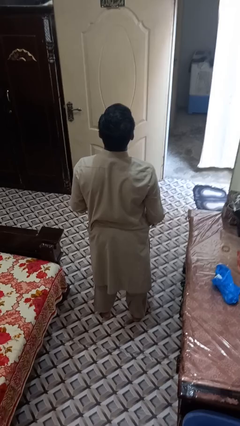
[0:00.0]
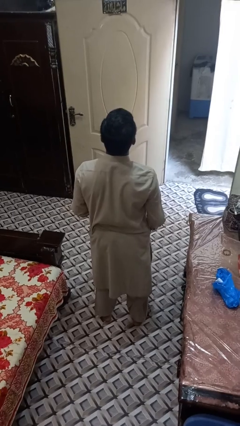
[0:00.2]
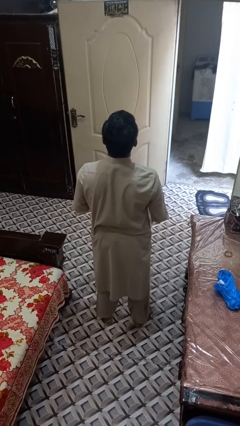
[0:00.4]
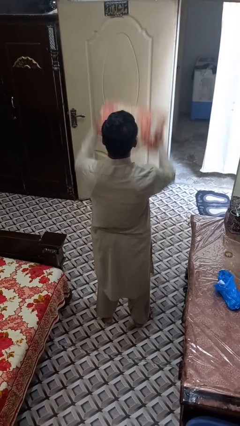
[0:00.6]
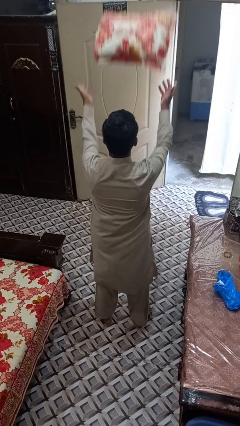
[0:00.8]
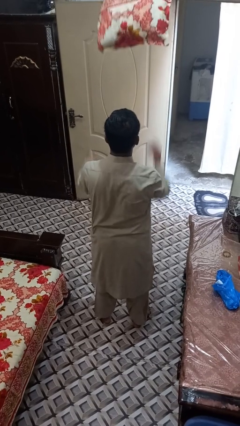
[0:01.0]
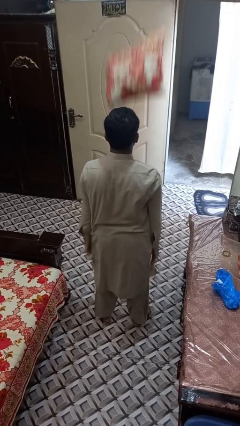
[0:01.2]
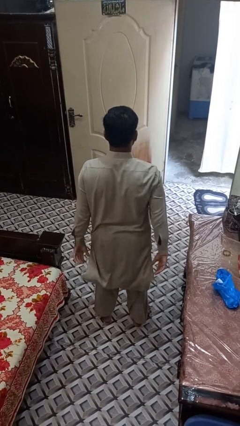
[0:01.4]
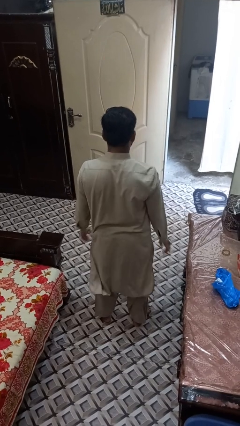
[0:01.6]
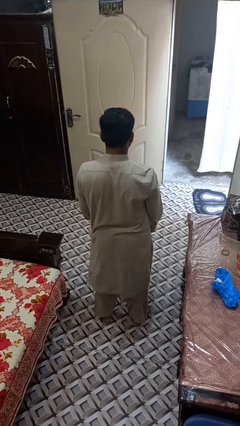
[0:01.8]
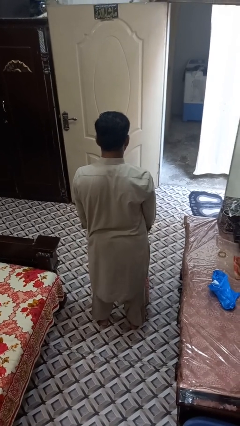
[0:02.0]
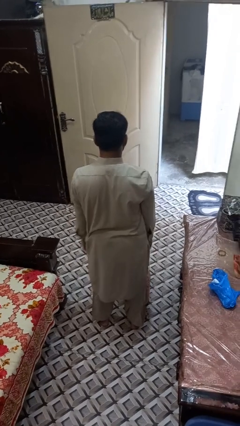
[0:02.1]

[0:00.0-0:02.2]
person throws object into air

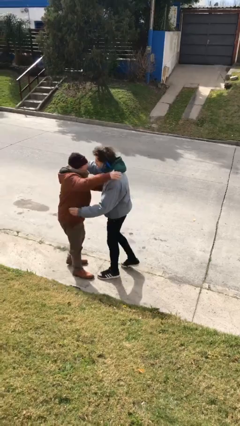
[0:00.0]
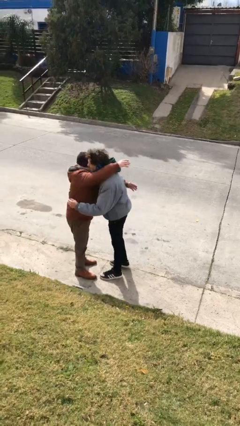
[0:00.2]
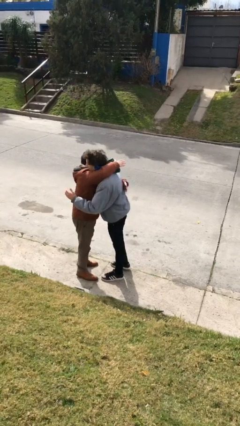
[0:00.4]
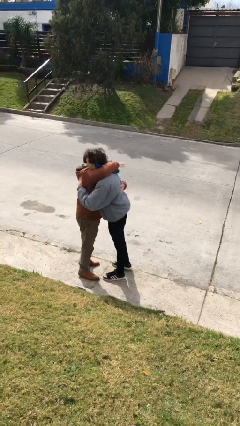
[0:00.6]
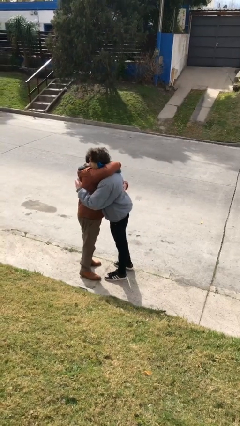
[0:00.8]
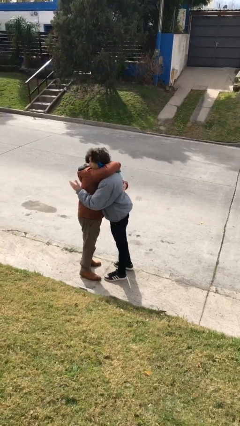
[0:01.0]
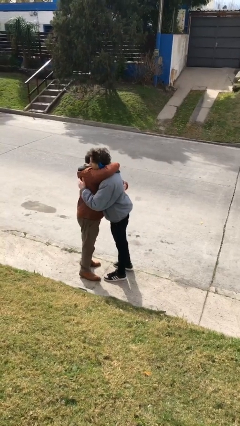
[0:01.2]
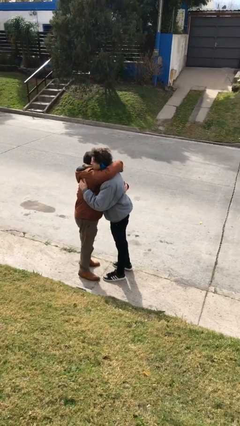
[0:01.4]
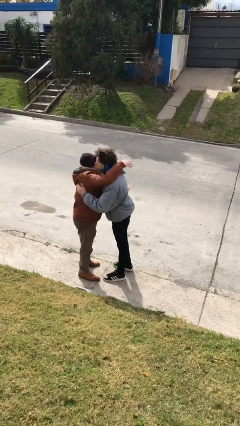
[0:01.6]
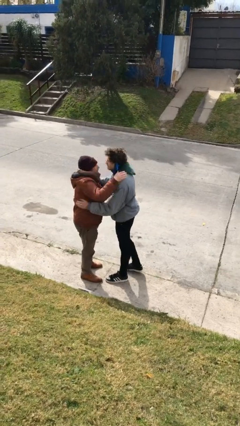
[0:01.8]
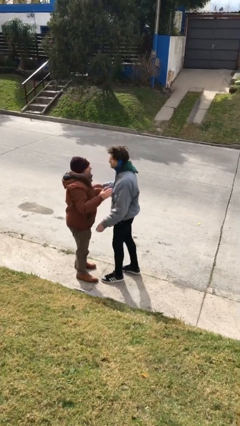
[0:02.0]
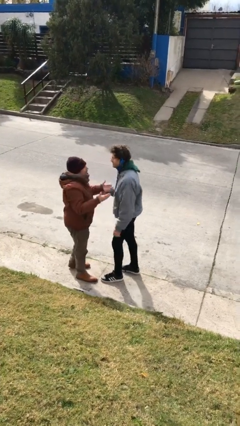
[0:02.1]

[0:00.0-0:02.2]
person embraces person

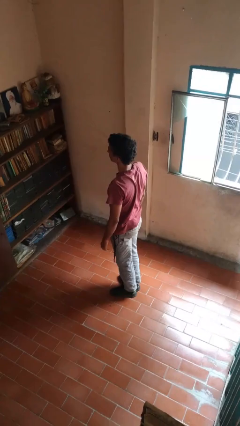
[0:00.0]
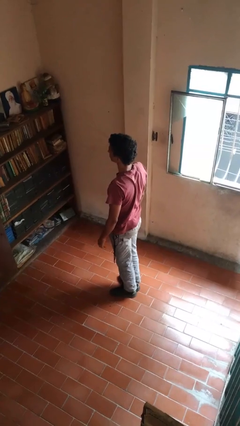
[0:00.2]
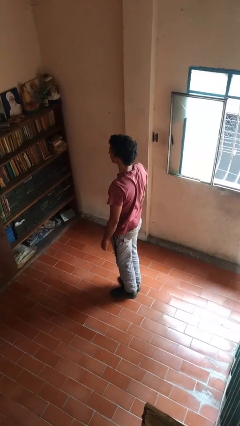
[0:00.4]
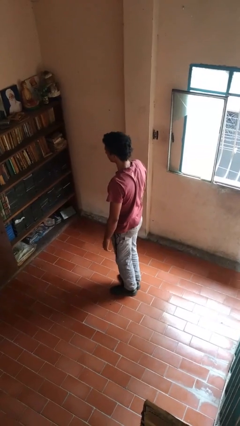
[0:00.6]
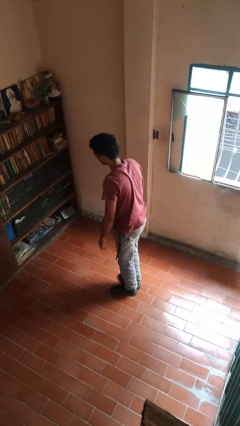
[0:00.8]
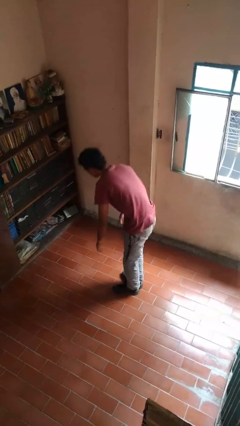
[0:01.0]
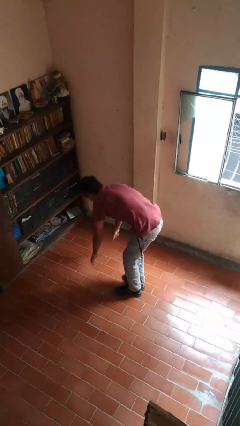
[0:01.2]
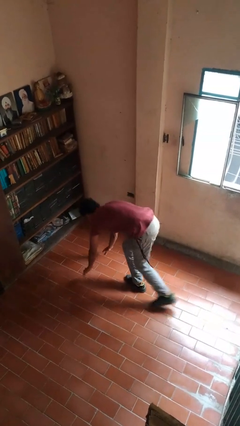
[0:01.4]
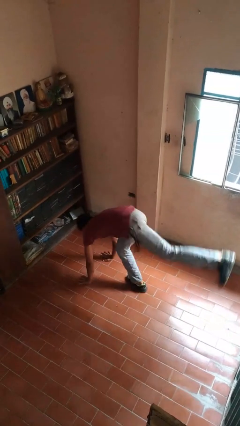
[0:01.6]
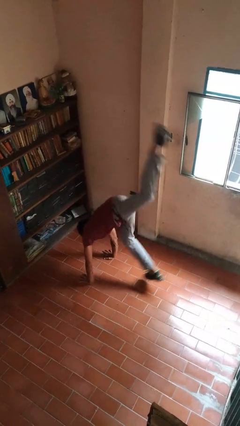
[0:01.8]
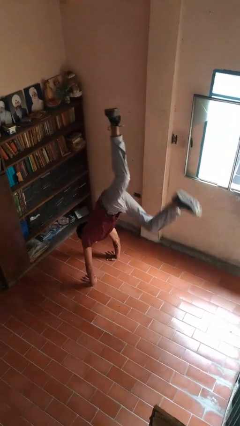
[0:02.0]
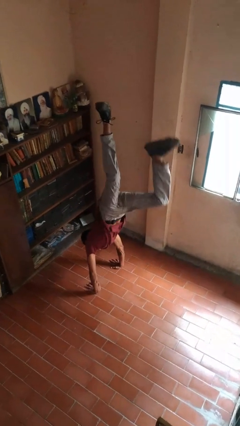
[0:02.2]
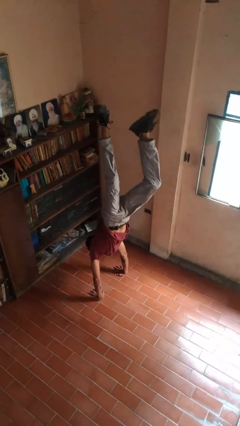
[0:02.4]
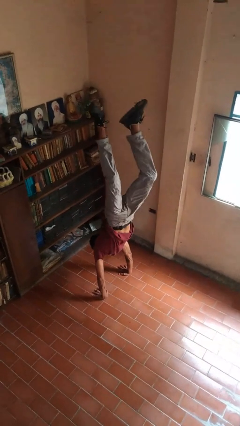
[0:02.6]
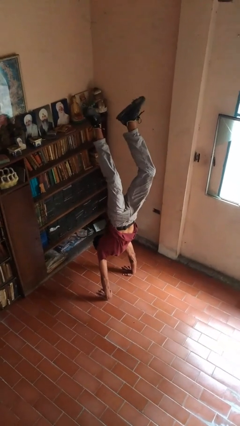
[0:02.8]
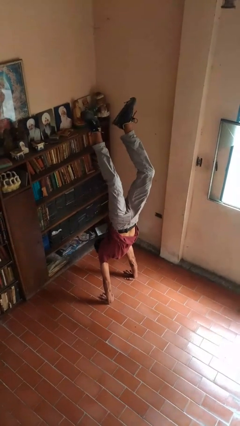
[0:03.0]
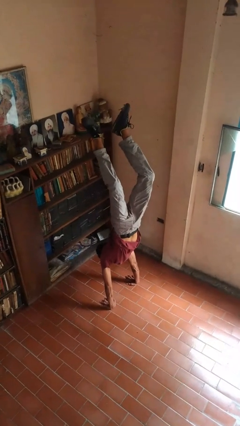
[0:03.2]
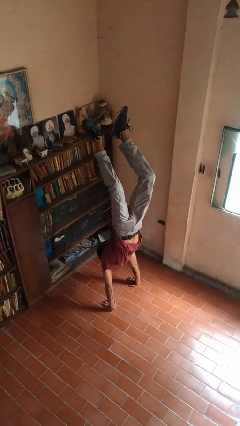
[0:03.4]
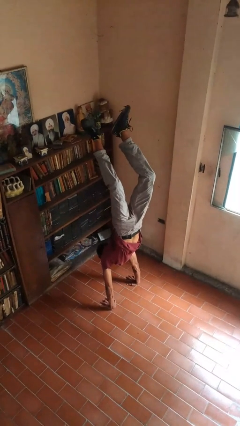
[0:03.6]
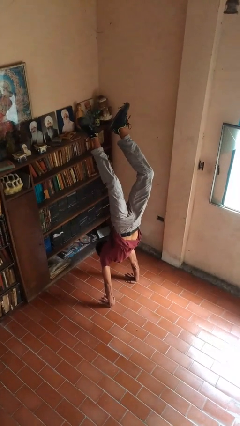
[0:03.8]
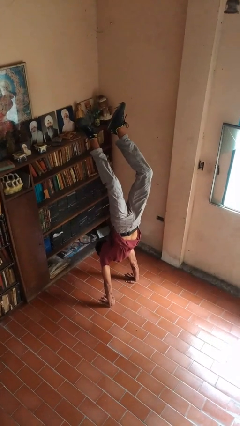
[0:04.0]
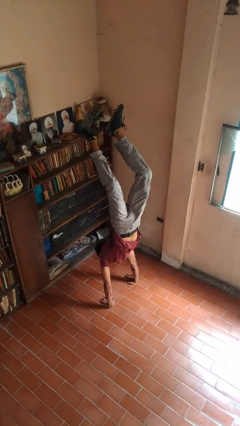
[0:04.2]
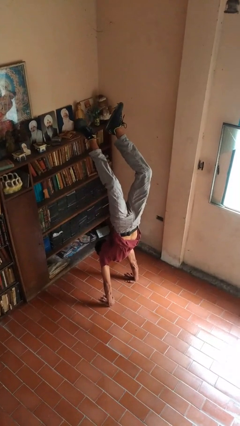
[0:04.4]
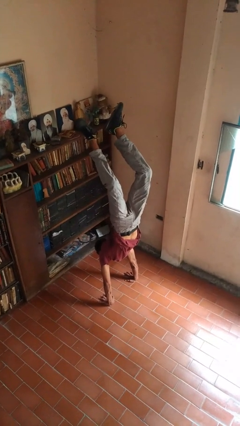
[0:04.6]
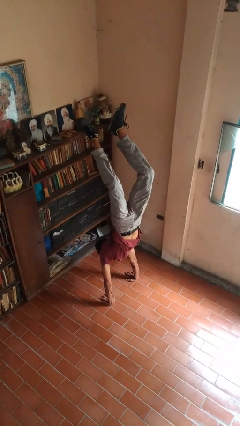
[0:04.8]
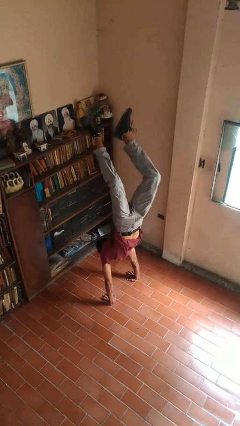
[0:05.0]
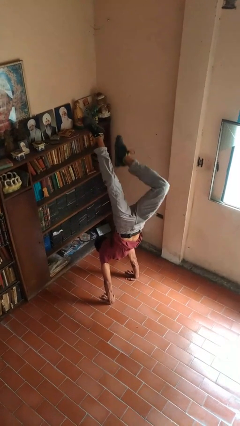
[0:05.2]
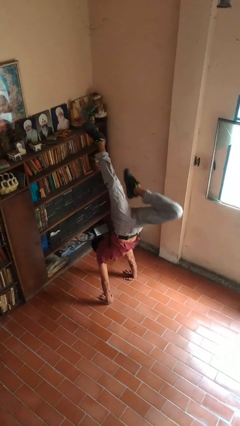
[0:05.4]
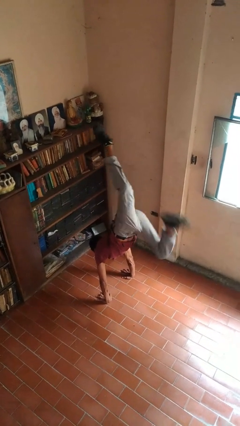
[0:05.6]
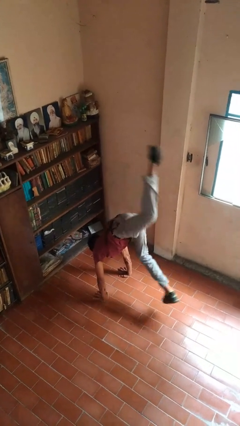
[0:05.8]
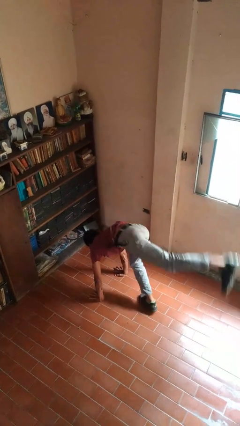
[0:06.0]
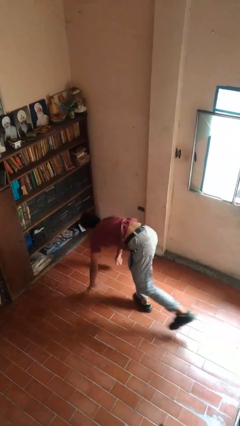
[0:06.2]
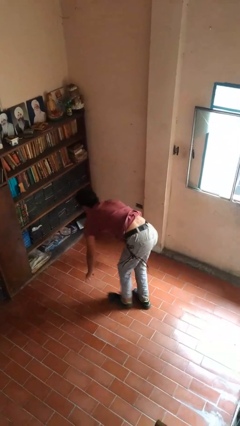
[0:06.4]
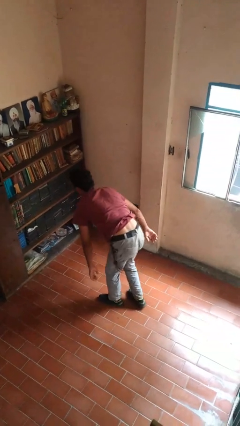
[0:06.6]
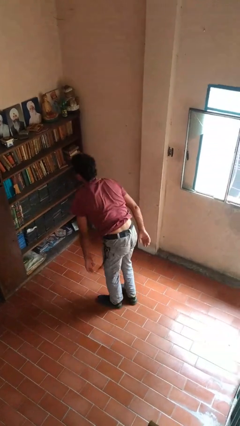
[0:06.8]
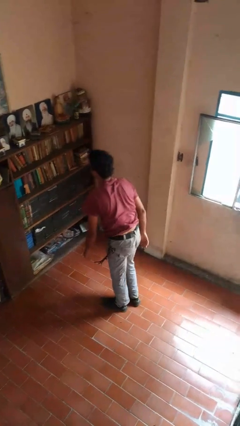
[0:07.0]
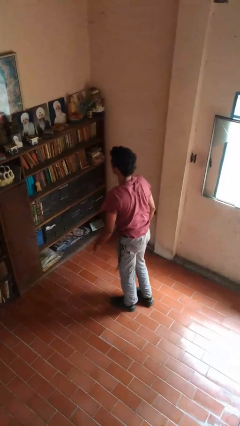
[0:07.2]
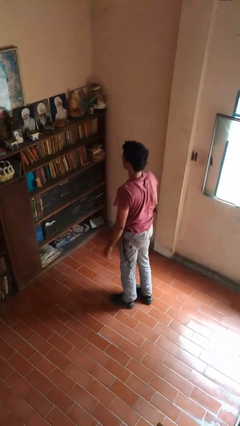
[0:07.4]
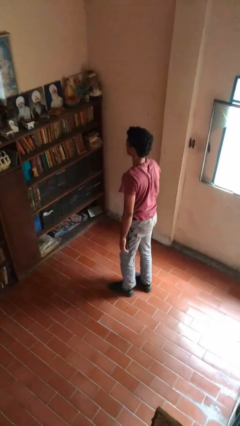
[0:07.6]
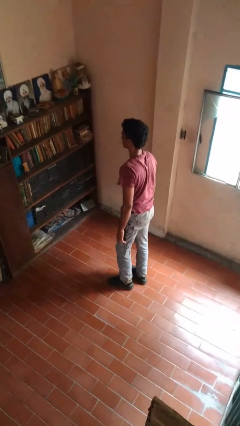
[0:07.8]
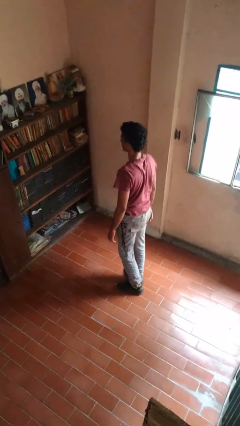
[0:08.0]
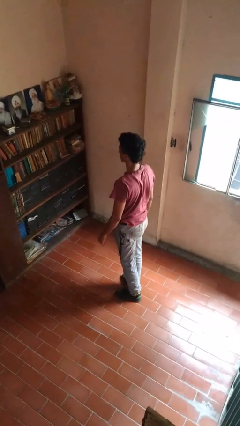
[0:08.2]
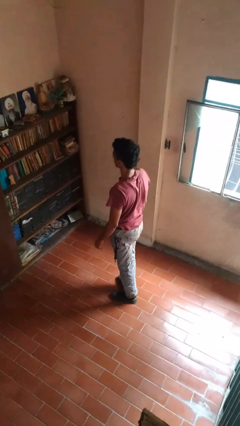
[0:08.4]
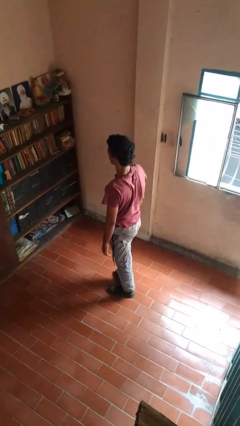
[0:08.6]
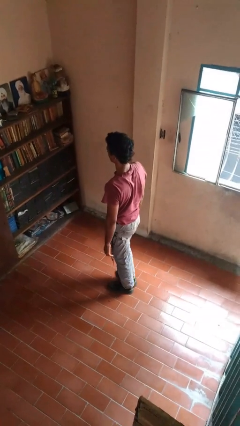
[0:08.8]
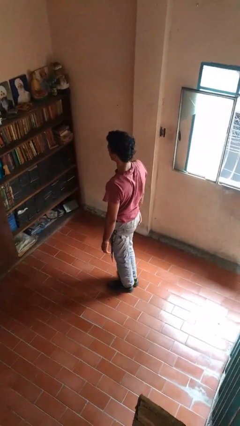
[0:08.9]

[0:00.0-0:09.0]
person handstand

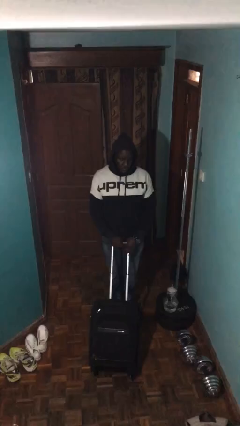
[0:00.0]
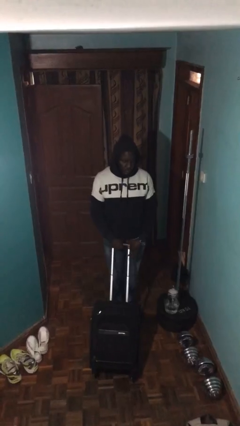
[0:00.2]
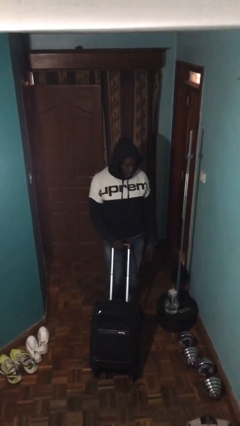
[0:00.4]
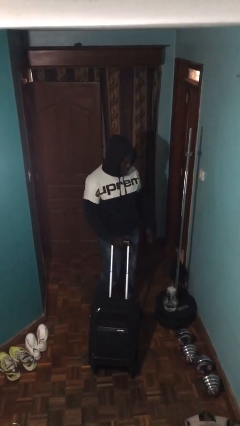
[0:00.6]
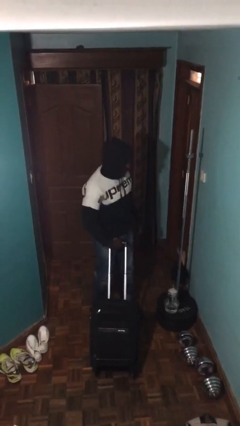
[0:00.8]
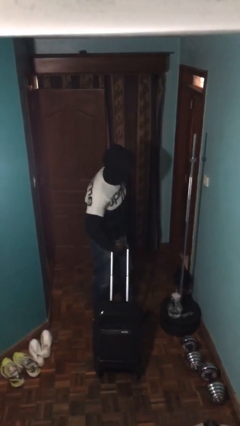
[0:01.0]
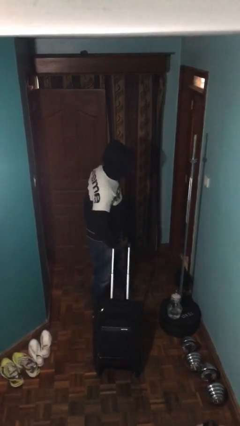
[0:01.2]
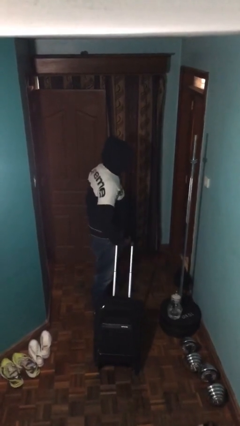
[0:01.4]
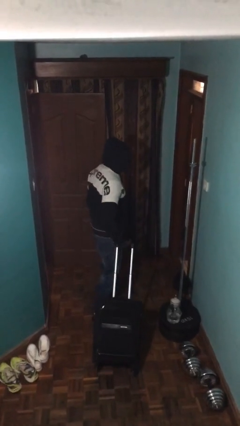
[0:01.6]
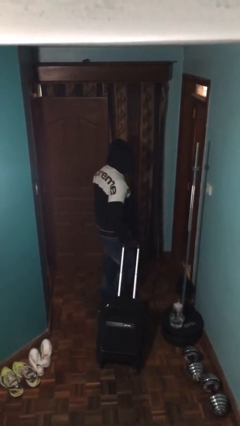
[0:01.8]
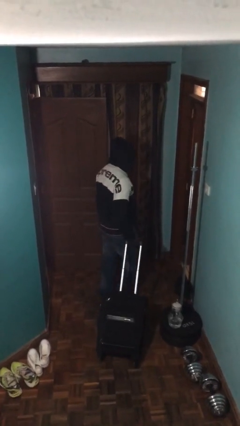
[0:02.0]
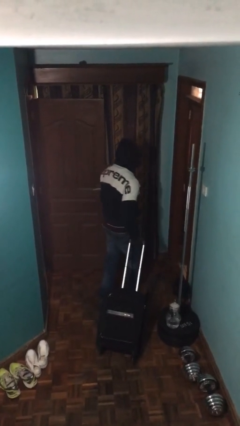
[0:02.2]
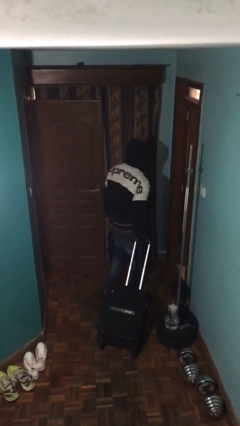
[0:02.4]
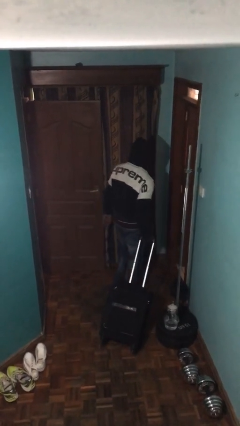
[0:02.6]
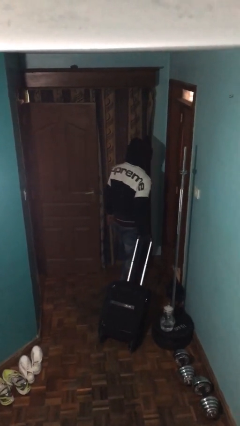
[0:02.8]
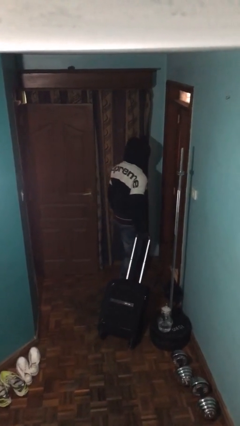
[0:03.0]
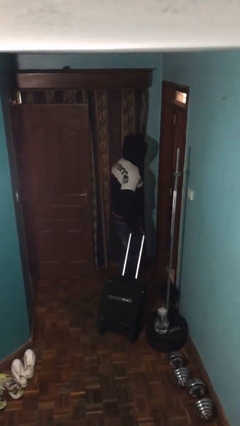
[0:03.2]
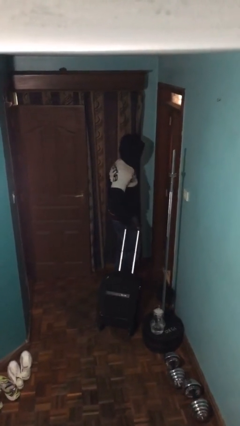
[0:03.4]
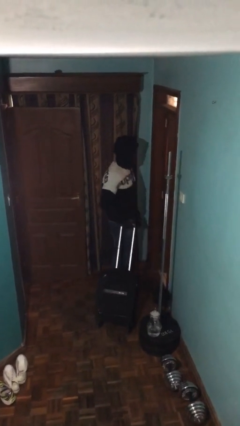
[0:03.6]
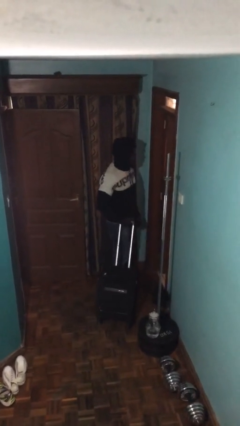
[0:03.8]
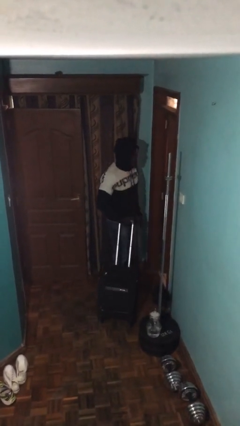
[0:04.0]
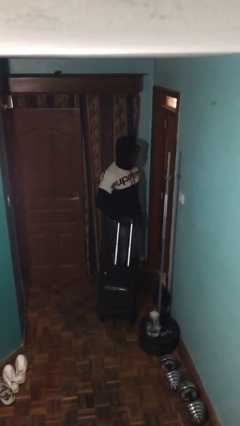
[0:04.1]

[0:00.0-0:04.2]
person pulls wheeled cart
